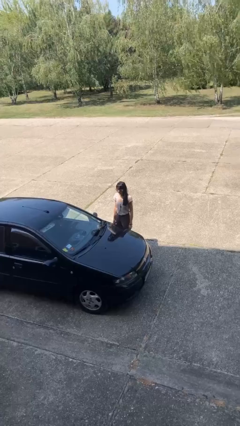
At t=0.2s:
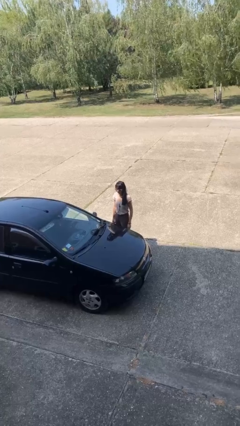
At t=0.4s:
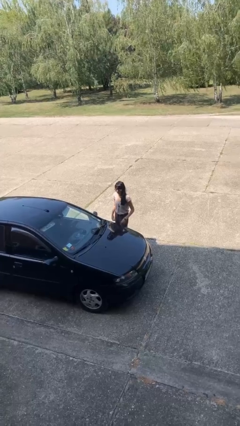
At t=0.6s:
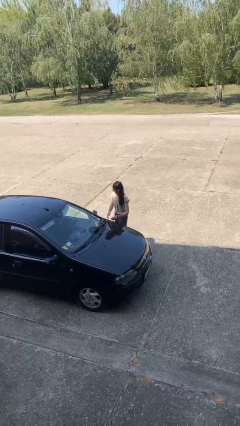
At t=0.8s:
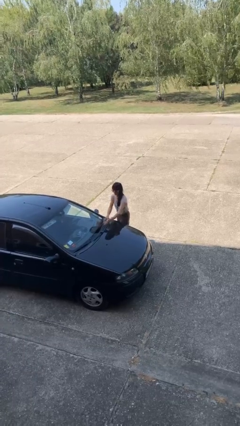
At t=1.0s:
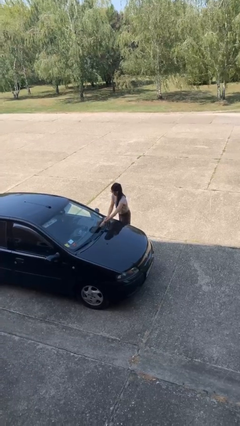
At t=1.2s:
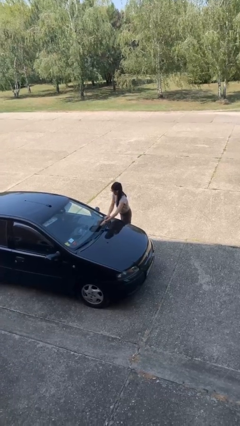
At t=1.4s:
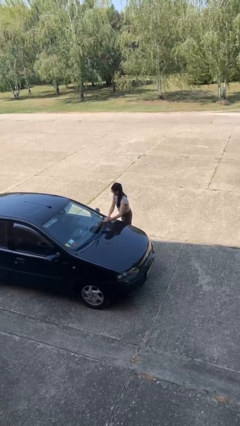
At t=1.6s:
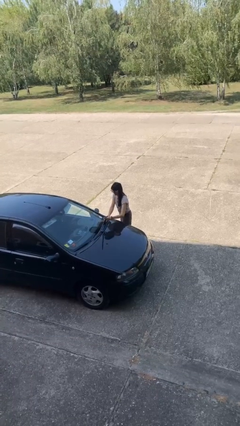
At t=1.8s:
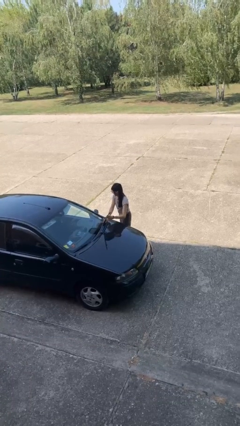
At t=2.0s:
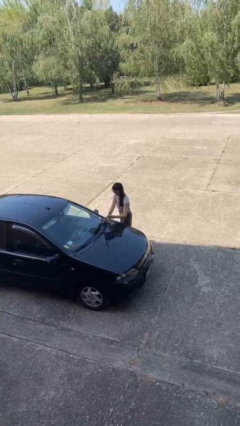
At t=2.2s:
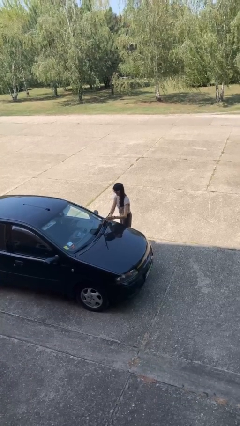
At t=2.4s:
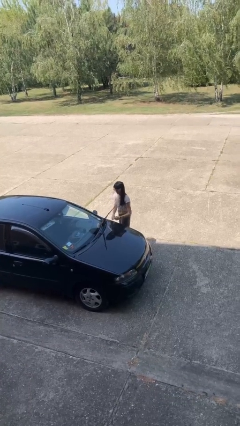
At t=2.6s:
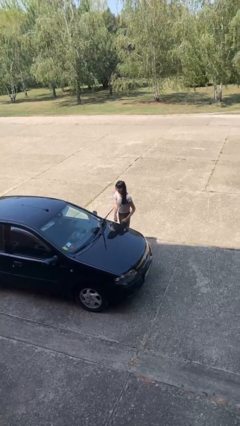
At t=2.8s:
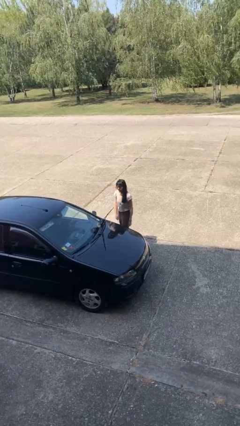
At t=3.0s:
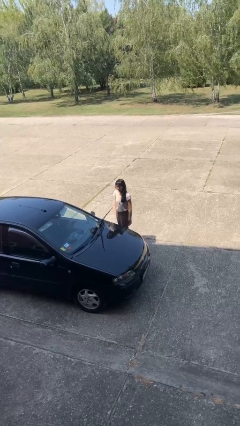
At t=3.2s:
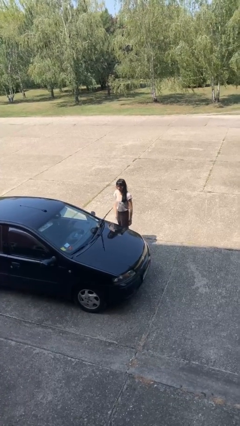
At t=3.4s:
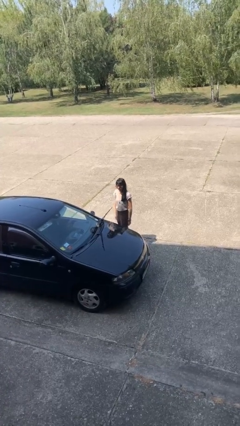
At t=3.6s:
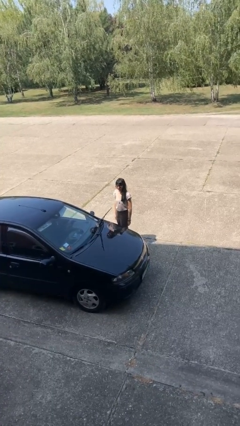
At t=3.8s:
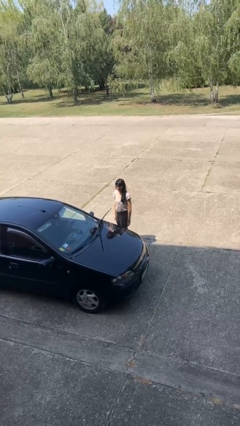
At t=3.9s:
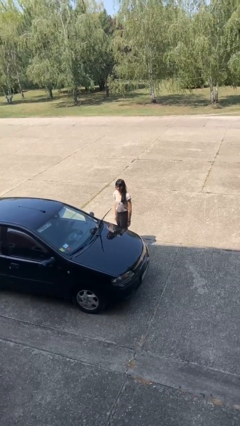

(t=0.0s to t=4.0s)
person flips up car wipers

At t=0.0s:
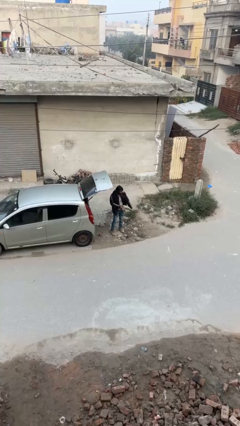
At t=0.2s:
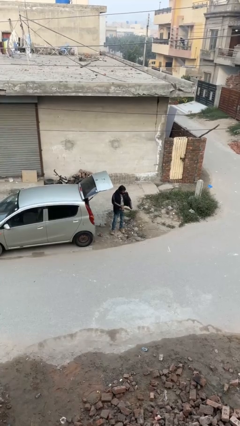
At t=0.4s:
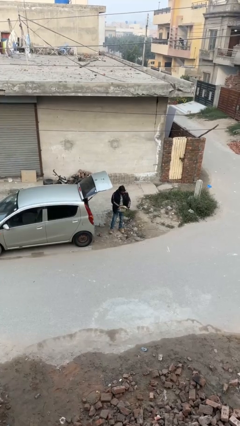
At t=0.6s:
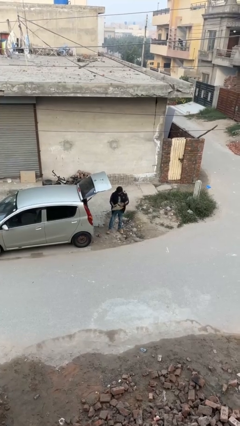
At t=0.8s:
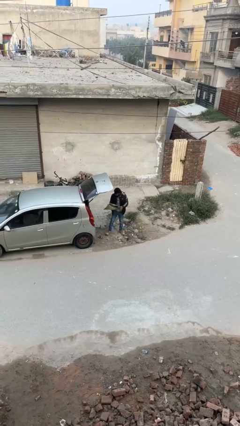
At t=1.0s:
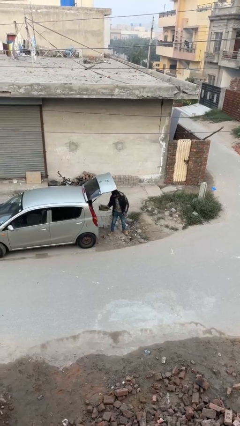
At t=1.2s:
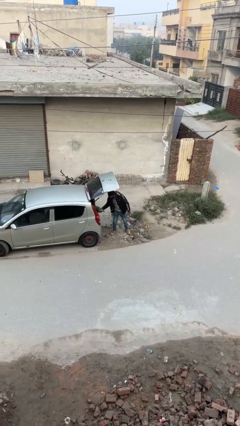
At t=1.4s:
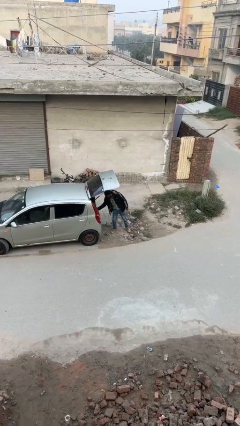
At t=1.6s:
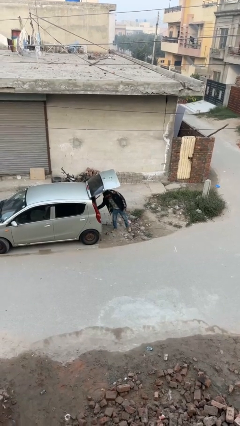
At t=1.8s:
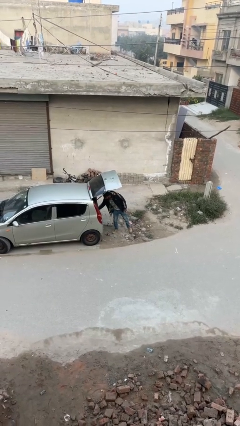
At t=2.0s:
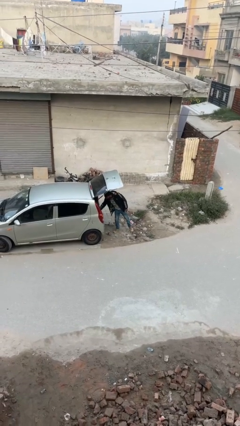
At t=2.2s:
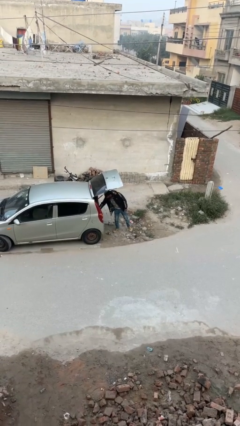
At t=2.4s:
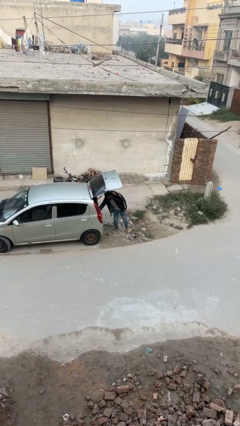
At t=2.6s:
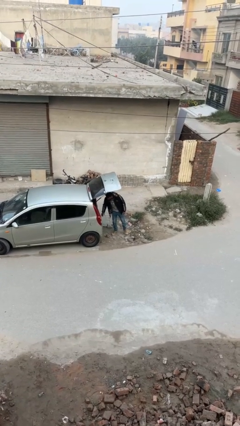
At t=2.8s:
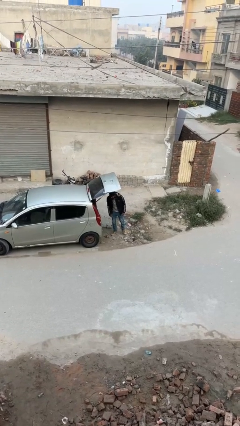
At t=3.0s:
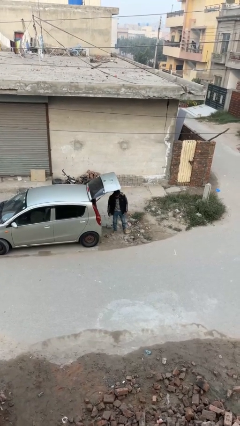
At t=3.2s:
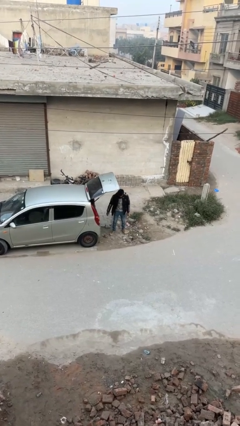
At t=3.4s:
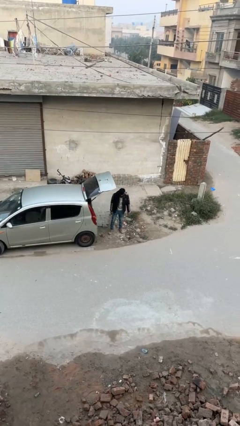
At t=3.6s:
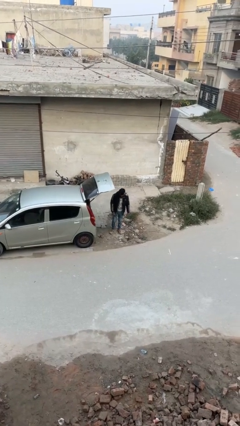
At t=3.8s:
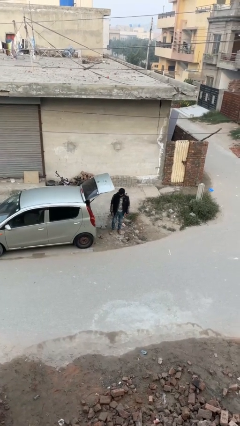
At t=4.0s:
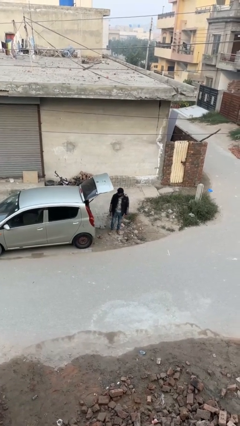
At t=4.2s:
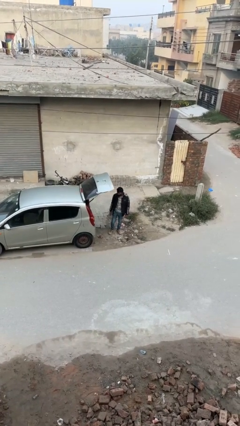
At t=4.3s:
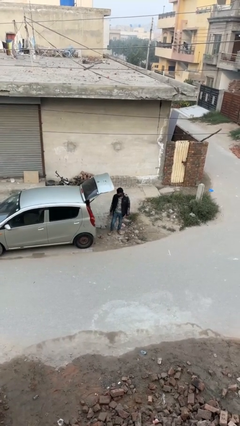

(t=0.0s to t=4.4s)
person loads car

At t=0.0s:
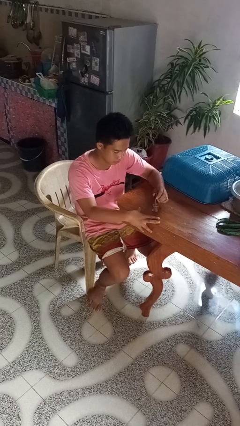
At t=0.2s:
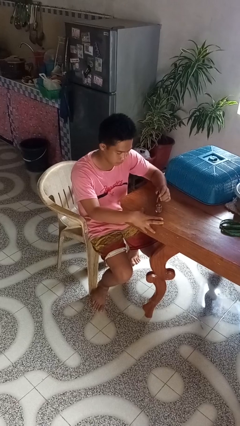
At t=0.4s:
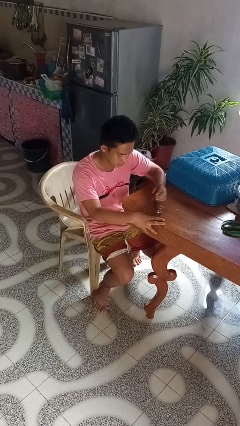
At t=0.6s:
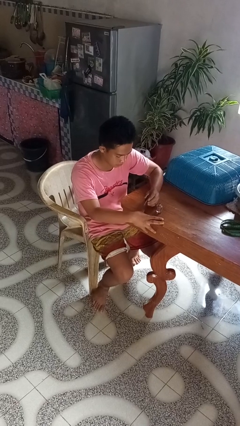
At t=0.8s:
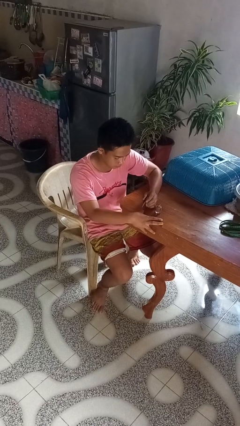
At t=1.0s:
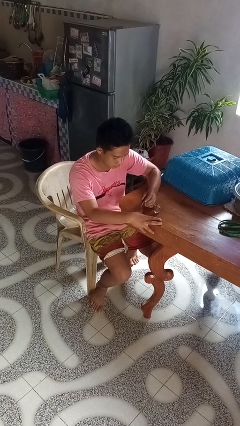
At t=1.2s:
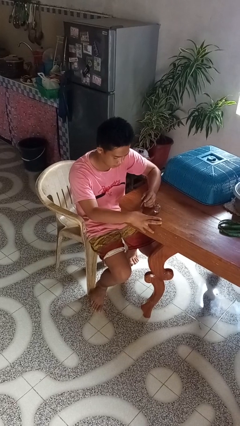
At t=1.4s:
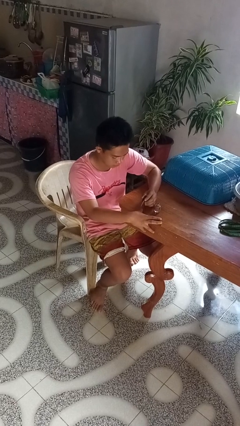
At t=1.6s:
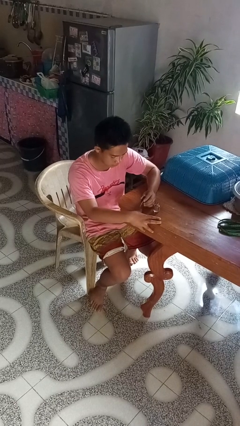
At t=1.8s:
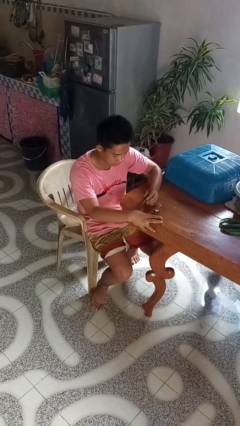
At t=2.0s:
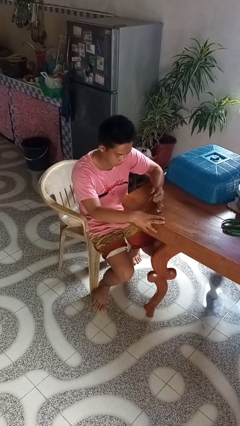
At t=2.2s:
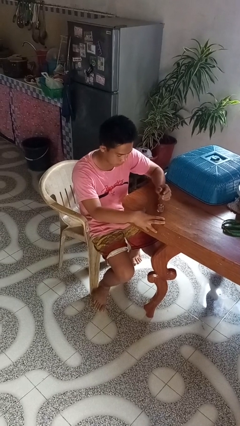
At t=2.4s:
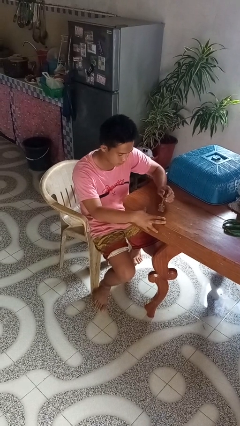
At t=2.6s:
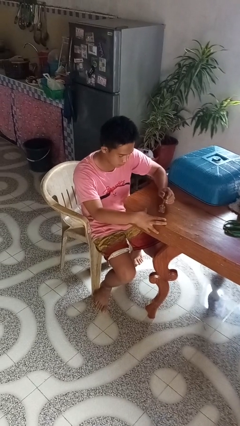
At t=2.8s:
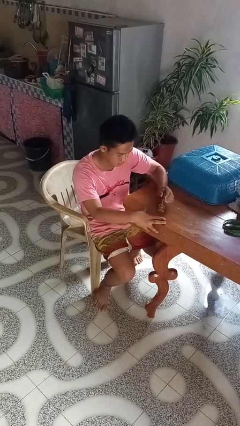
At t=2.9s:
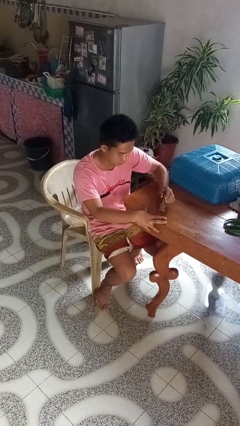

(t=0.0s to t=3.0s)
person paints fingernails

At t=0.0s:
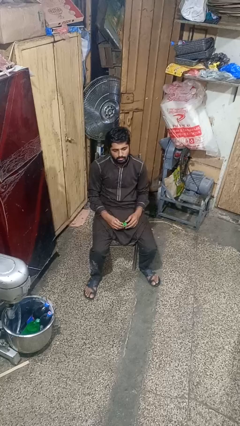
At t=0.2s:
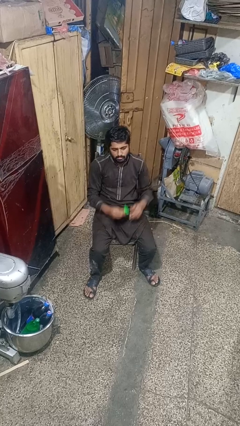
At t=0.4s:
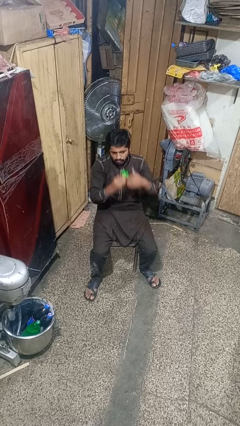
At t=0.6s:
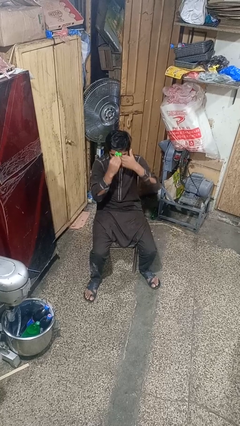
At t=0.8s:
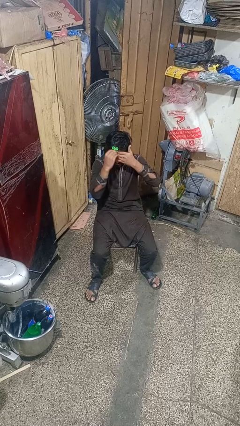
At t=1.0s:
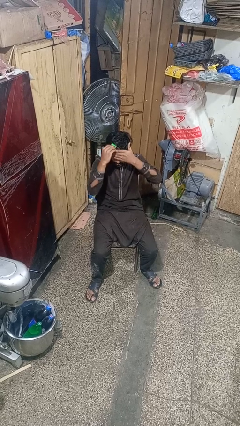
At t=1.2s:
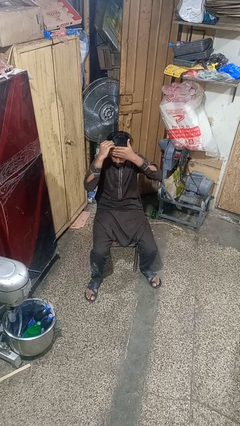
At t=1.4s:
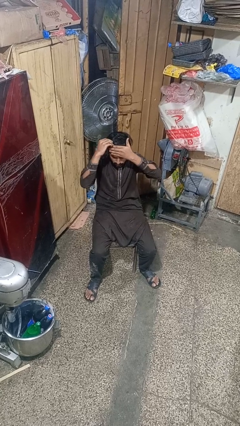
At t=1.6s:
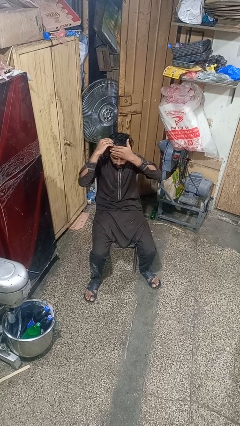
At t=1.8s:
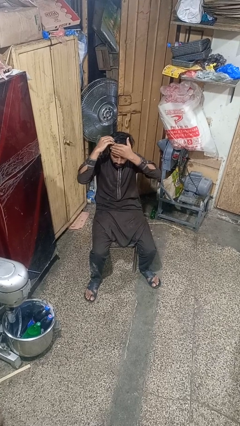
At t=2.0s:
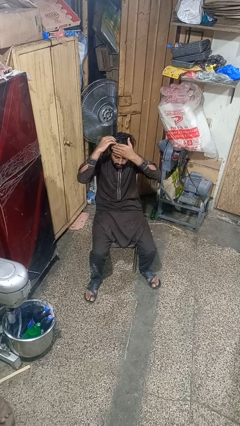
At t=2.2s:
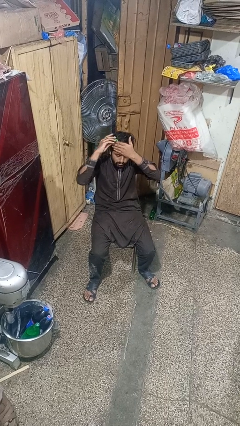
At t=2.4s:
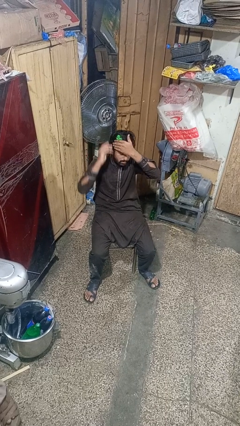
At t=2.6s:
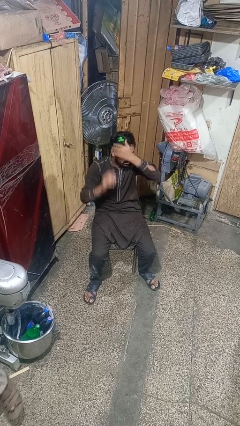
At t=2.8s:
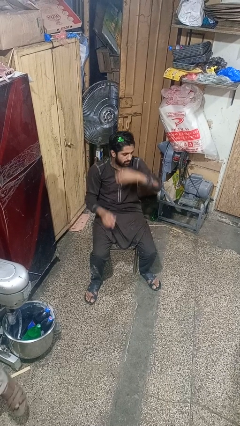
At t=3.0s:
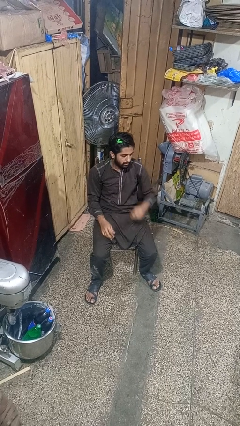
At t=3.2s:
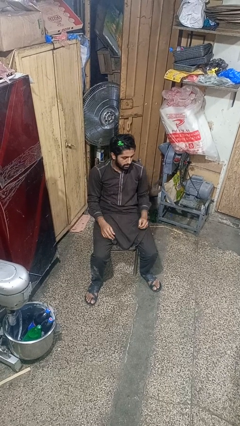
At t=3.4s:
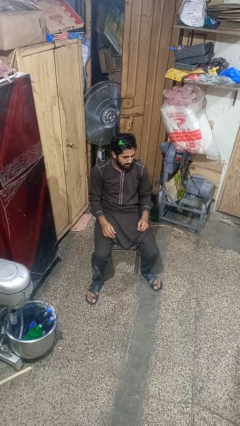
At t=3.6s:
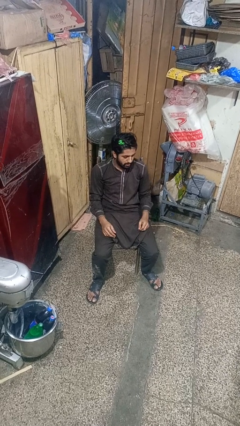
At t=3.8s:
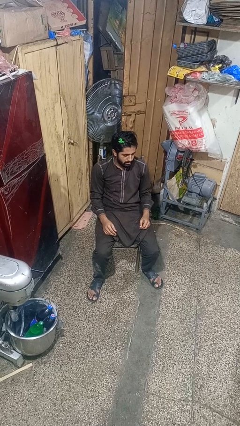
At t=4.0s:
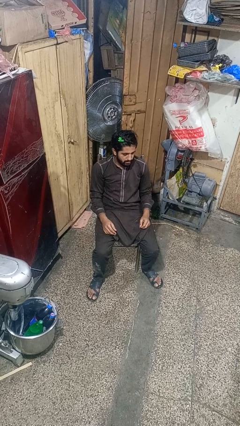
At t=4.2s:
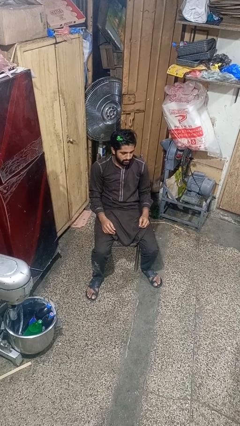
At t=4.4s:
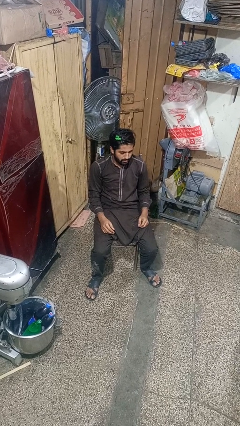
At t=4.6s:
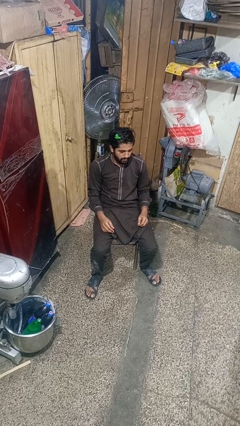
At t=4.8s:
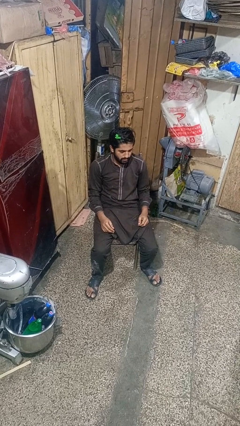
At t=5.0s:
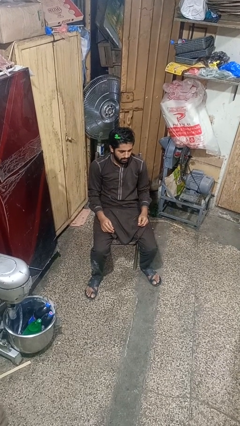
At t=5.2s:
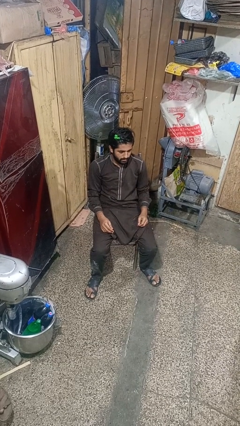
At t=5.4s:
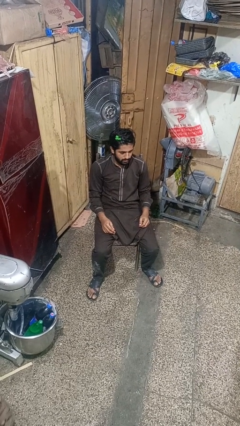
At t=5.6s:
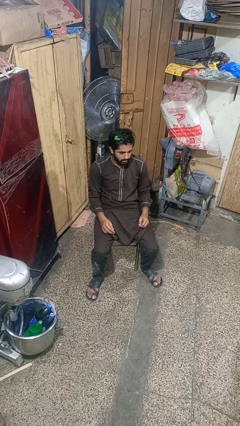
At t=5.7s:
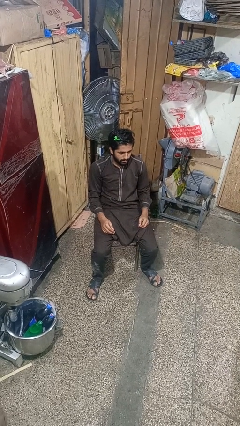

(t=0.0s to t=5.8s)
person puts hair in ponytail

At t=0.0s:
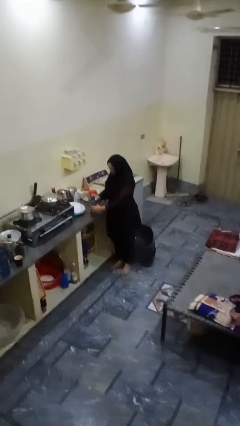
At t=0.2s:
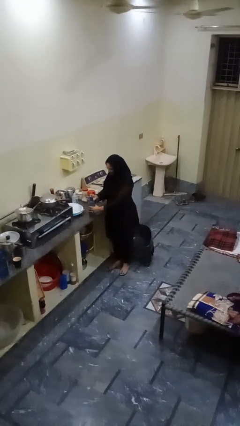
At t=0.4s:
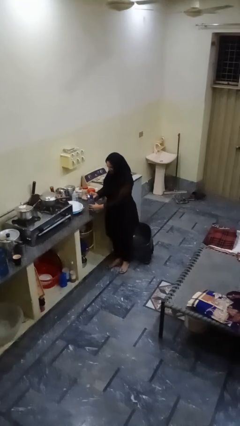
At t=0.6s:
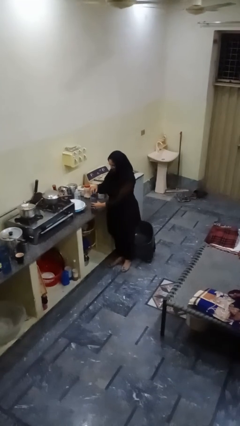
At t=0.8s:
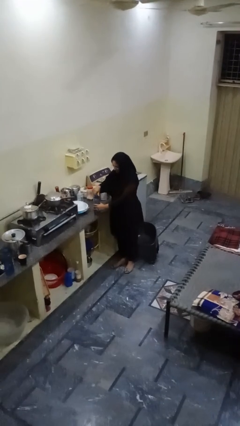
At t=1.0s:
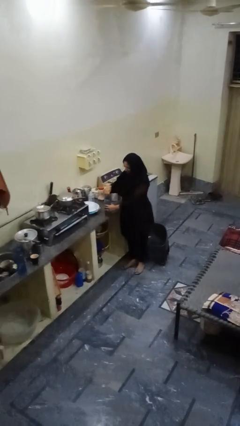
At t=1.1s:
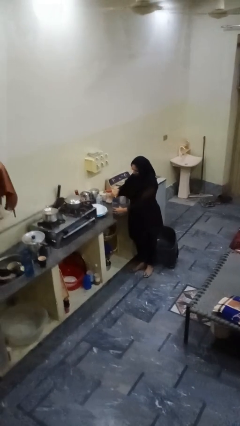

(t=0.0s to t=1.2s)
person screws lid to bottle
